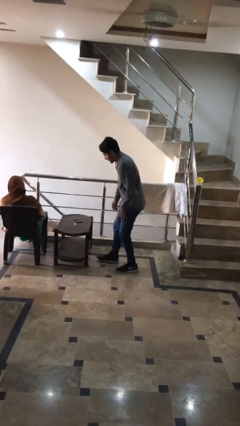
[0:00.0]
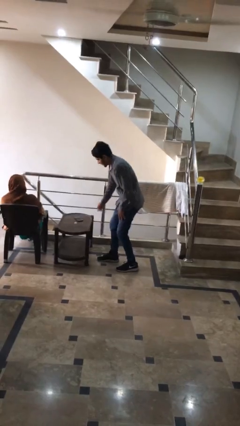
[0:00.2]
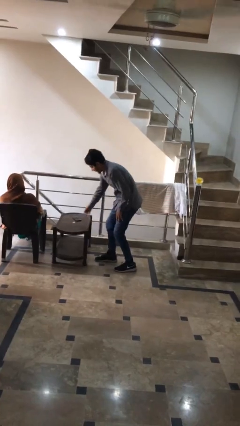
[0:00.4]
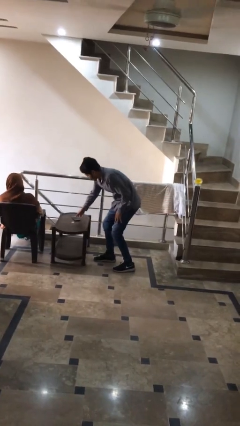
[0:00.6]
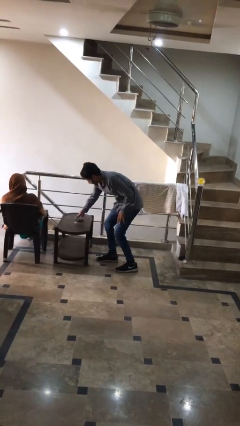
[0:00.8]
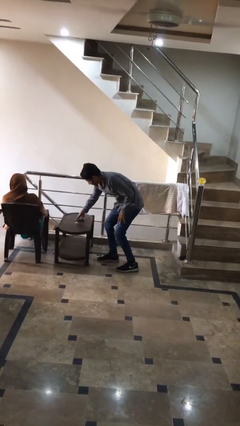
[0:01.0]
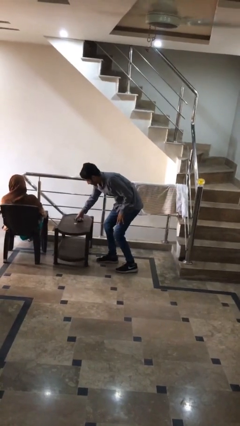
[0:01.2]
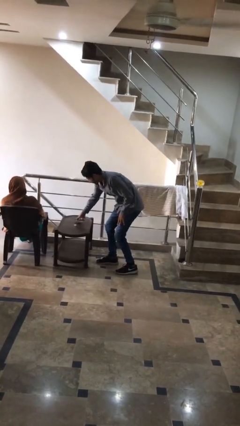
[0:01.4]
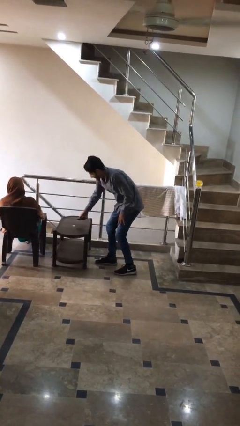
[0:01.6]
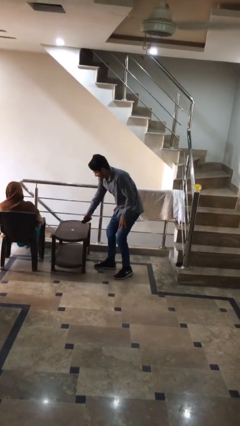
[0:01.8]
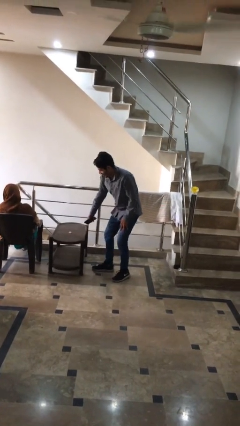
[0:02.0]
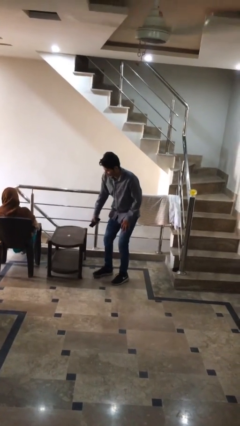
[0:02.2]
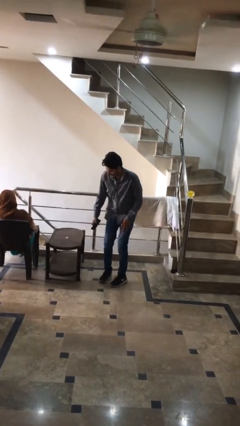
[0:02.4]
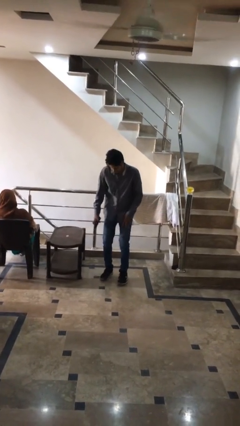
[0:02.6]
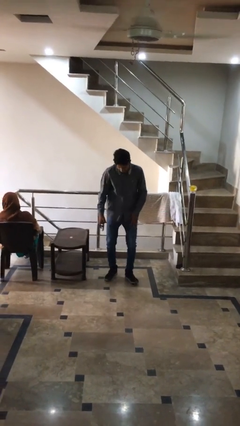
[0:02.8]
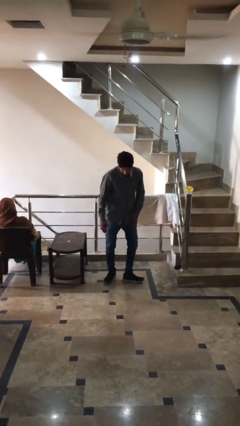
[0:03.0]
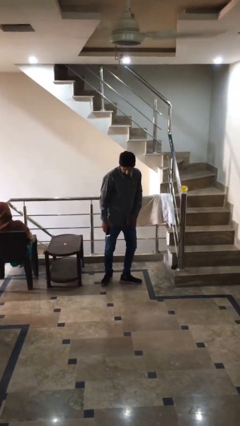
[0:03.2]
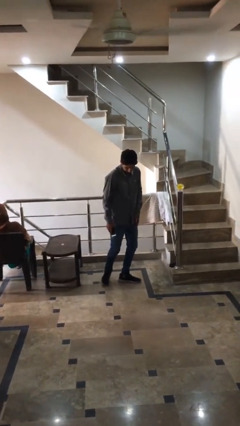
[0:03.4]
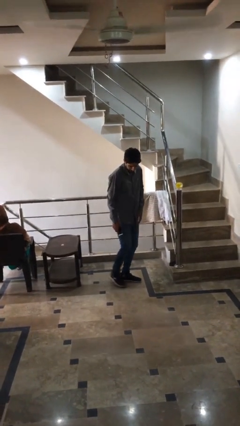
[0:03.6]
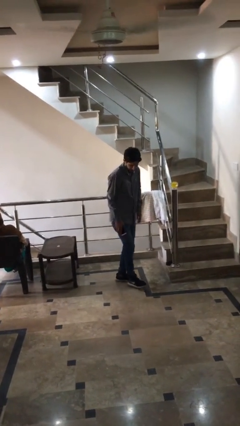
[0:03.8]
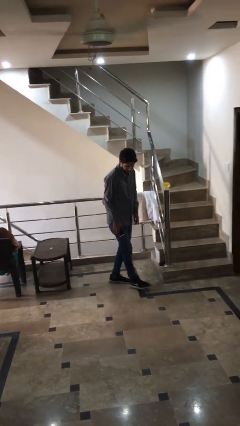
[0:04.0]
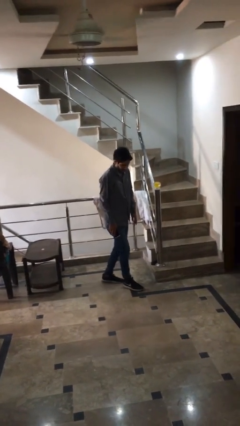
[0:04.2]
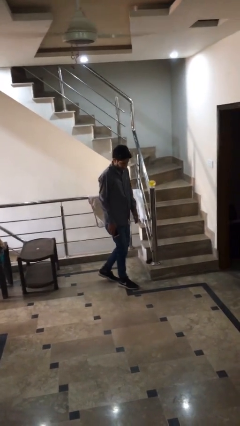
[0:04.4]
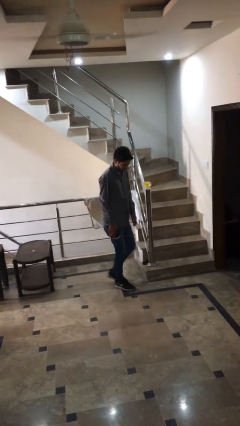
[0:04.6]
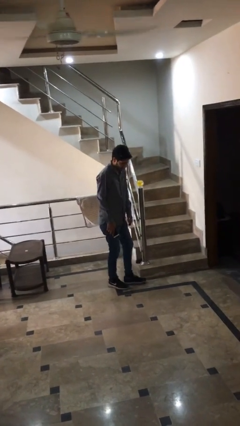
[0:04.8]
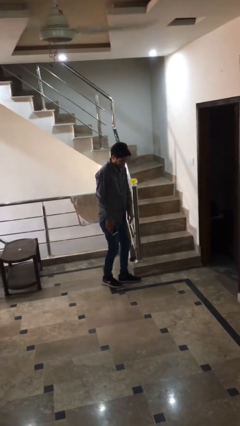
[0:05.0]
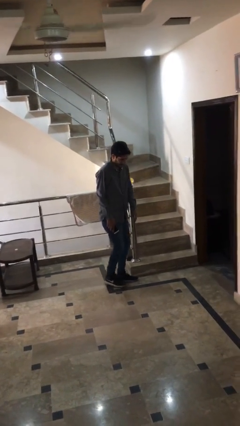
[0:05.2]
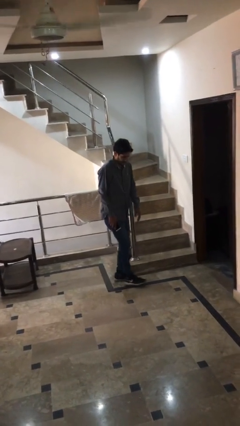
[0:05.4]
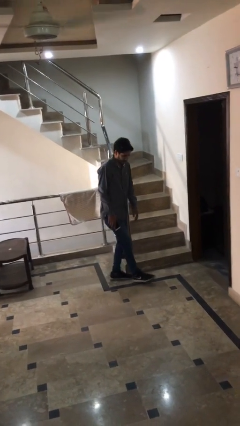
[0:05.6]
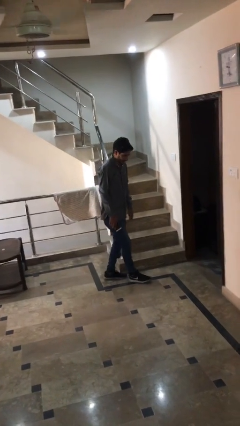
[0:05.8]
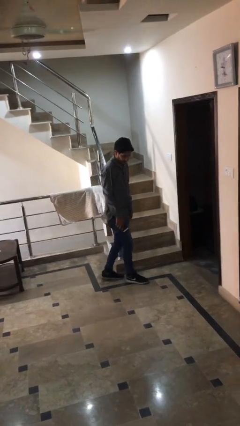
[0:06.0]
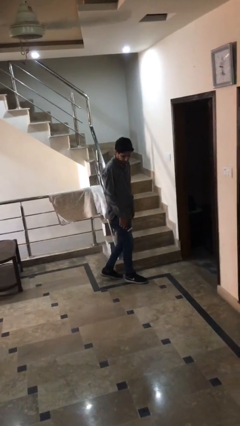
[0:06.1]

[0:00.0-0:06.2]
person steals object from person

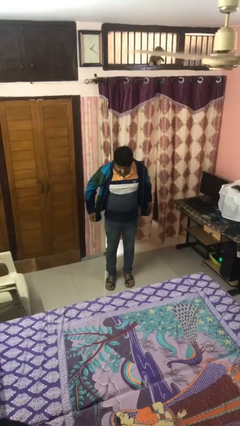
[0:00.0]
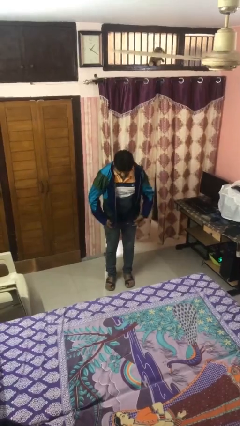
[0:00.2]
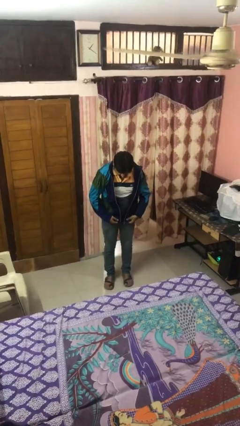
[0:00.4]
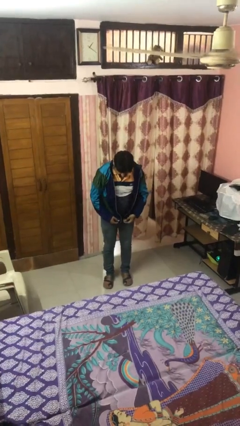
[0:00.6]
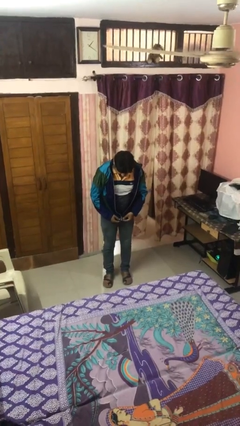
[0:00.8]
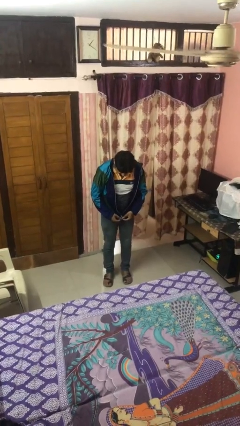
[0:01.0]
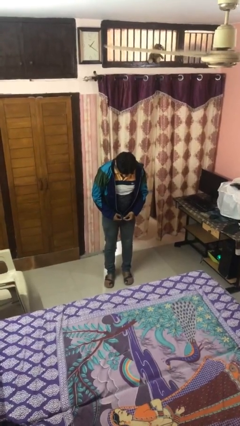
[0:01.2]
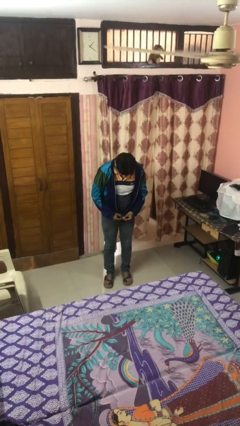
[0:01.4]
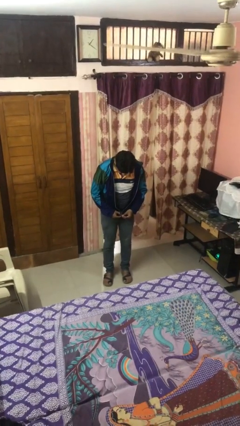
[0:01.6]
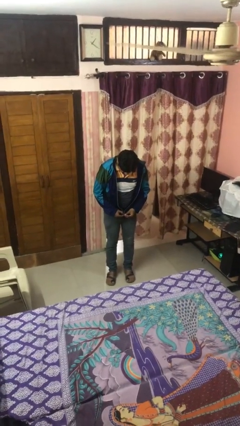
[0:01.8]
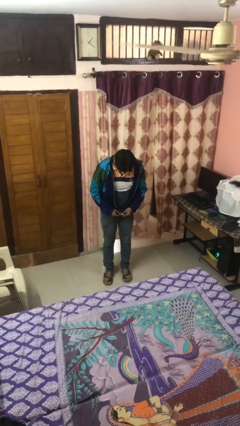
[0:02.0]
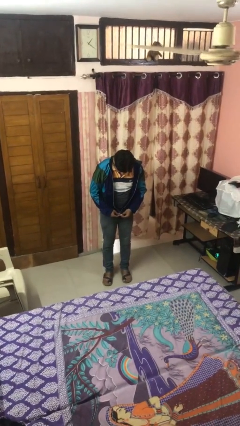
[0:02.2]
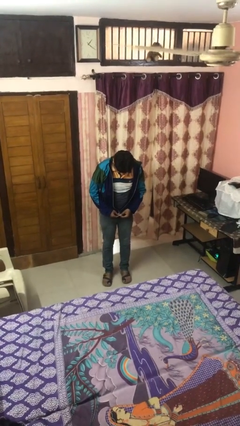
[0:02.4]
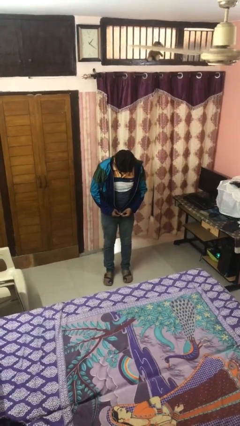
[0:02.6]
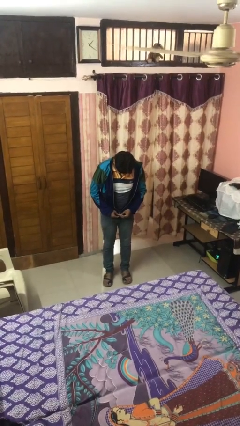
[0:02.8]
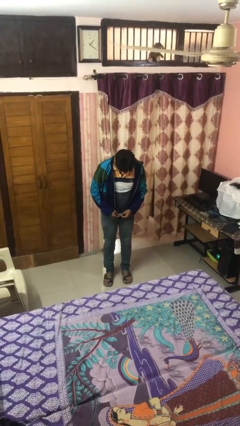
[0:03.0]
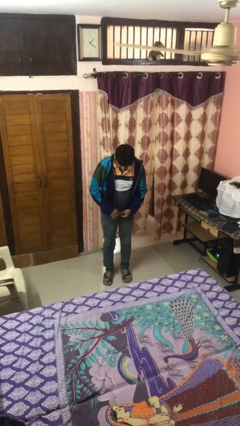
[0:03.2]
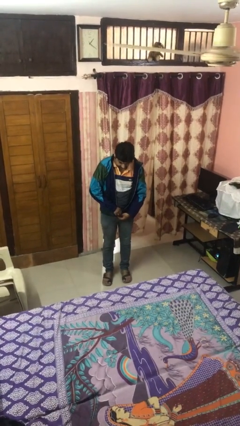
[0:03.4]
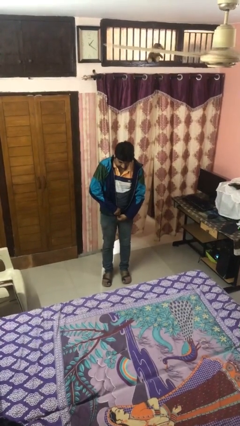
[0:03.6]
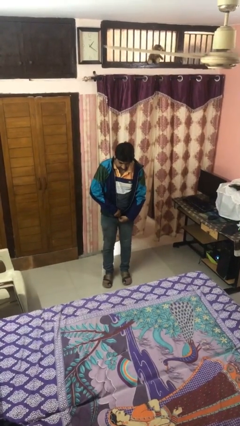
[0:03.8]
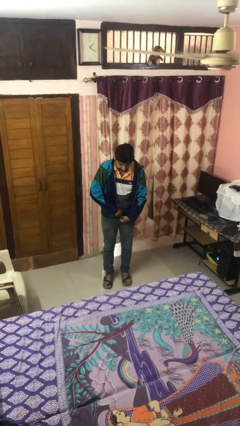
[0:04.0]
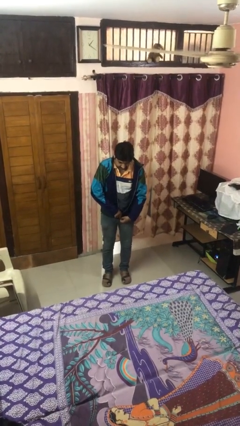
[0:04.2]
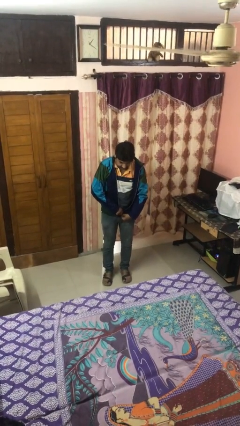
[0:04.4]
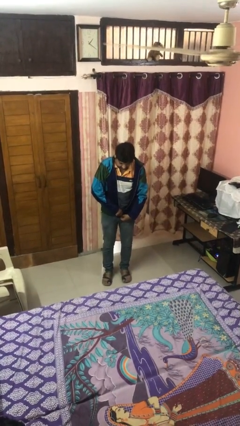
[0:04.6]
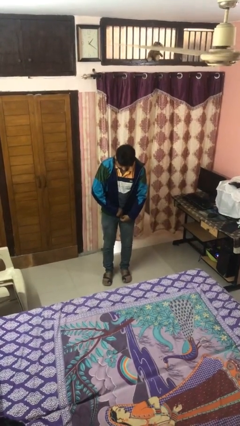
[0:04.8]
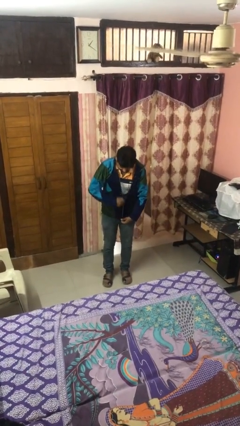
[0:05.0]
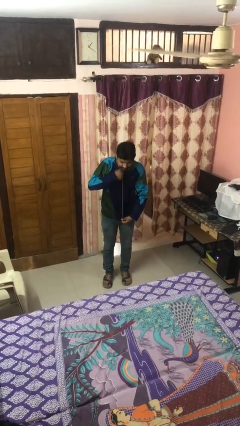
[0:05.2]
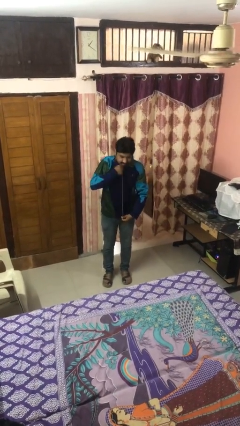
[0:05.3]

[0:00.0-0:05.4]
person zips up jacket

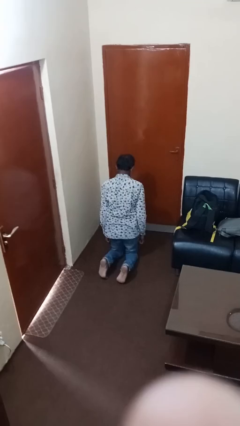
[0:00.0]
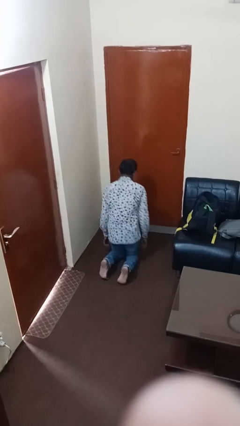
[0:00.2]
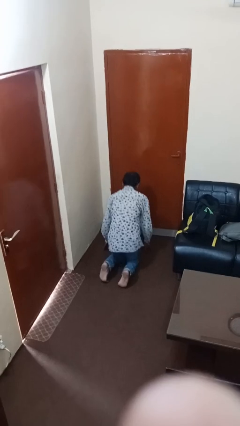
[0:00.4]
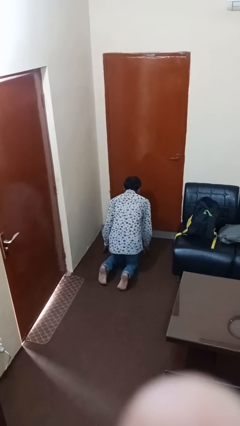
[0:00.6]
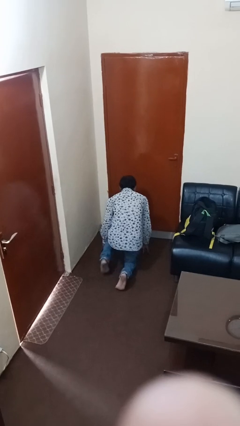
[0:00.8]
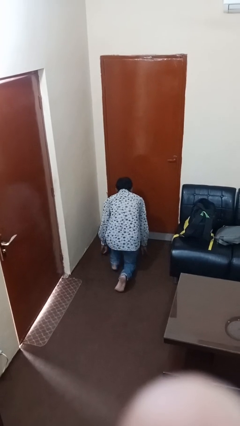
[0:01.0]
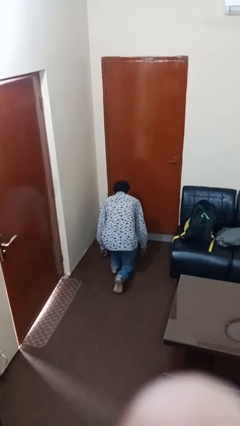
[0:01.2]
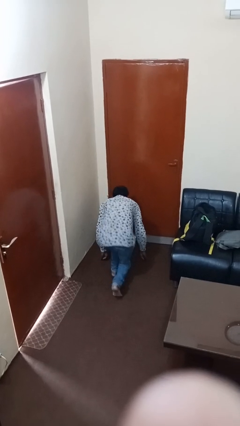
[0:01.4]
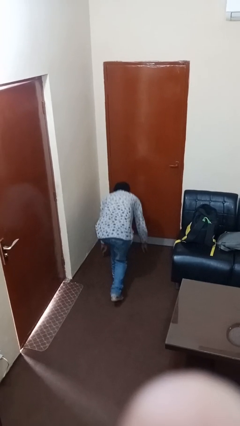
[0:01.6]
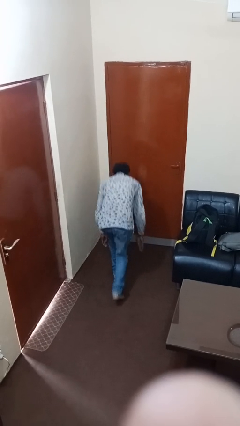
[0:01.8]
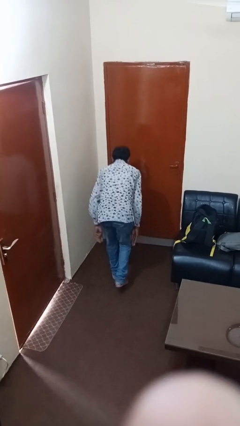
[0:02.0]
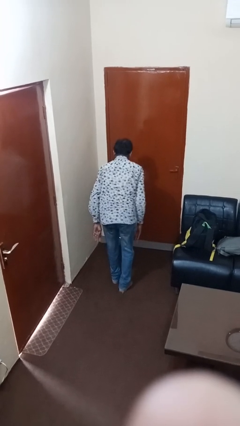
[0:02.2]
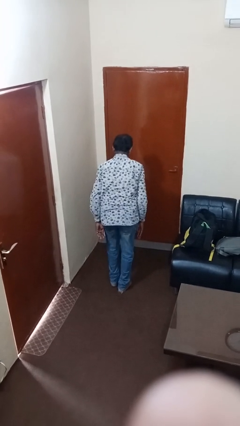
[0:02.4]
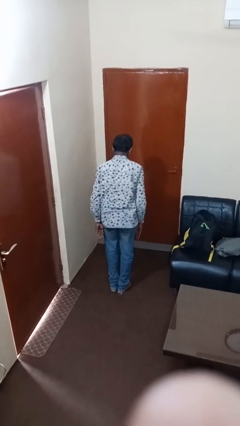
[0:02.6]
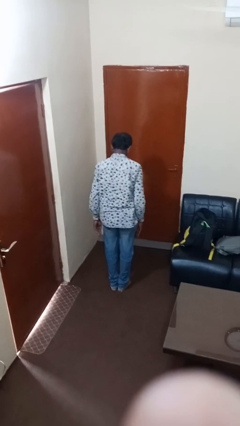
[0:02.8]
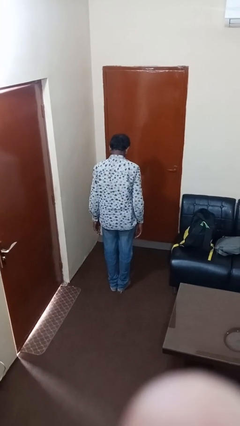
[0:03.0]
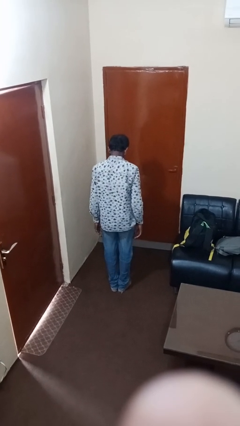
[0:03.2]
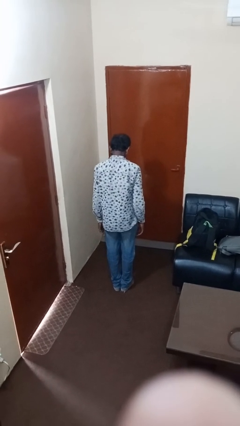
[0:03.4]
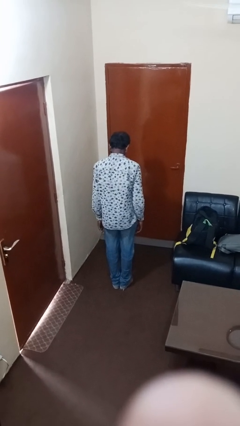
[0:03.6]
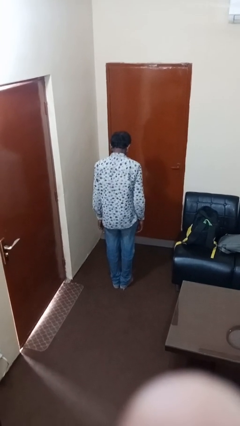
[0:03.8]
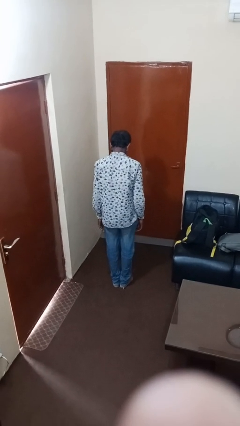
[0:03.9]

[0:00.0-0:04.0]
person stands up from floor

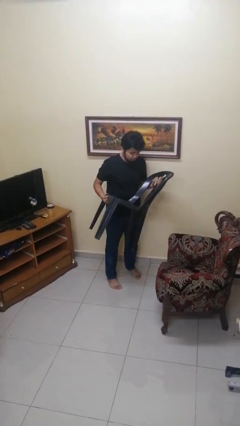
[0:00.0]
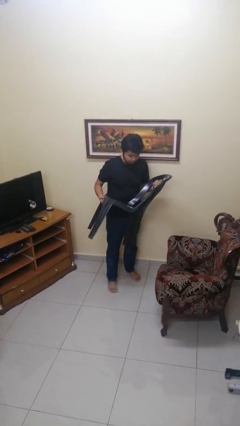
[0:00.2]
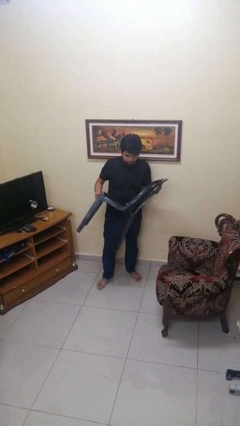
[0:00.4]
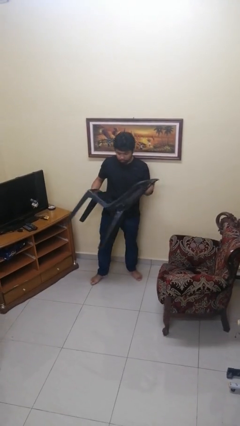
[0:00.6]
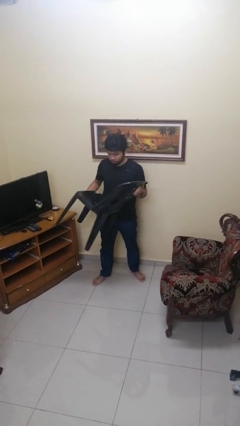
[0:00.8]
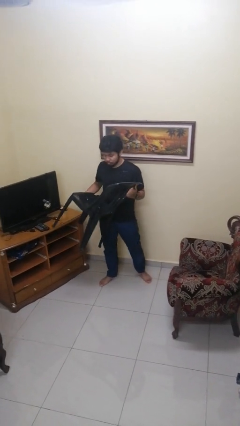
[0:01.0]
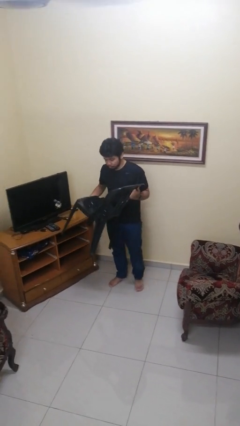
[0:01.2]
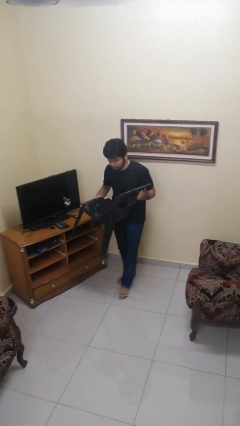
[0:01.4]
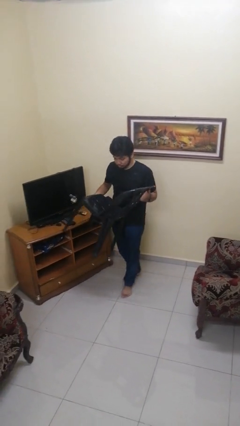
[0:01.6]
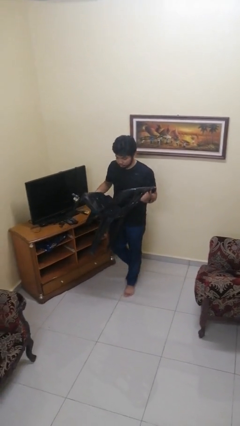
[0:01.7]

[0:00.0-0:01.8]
person carries furniture

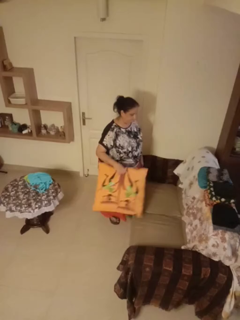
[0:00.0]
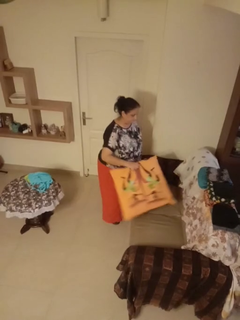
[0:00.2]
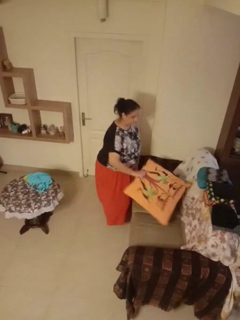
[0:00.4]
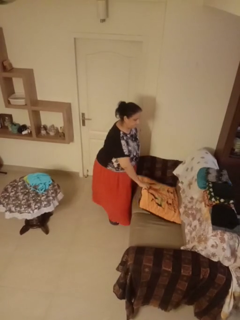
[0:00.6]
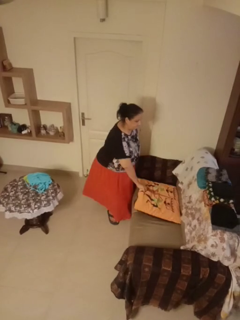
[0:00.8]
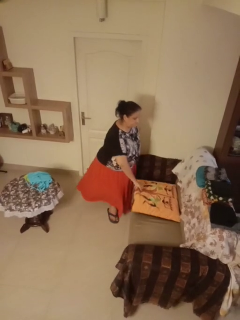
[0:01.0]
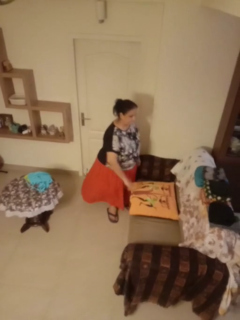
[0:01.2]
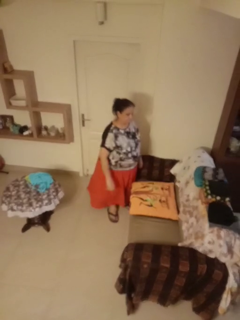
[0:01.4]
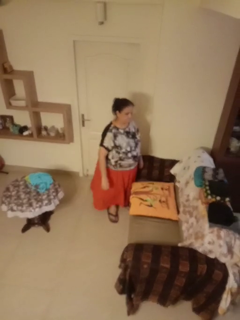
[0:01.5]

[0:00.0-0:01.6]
person puts down object on couch
